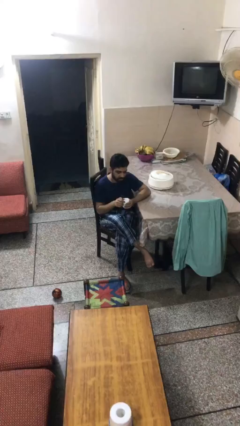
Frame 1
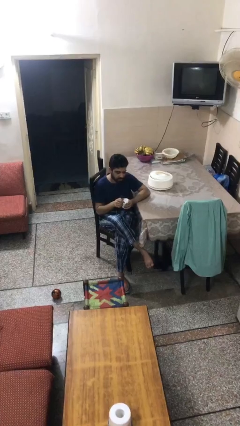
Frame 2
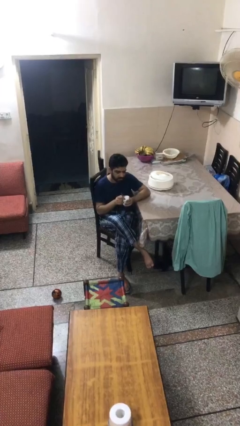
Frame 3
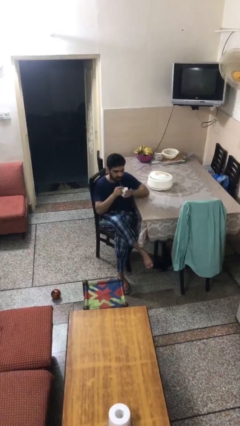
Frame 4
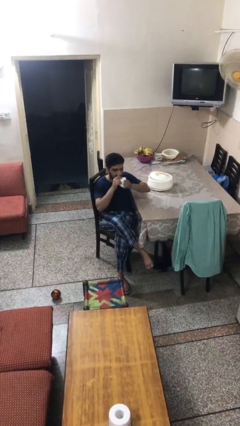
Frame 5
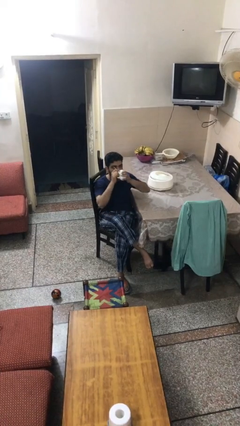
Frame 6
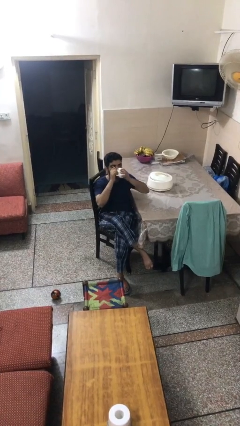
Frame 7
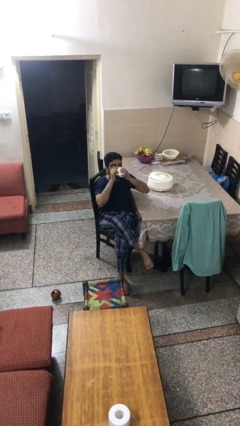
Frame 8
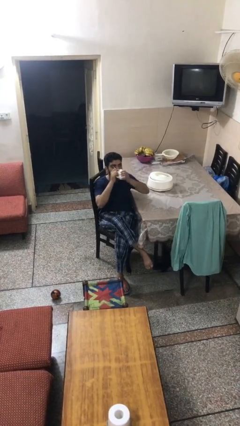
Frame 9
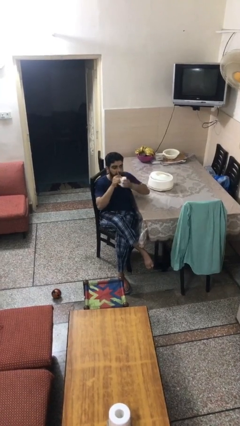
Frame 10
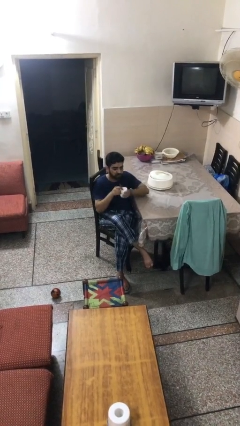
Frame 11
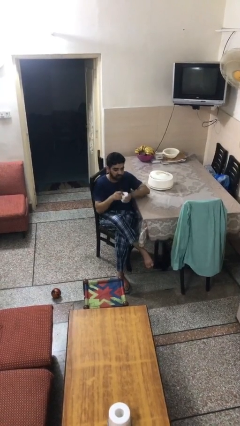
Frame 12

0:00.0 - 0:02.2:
person drinks from mug

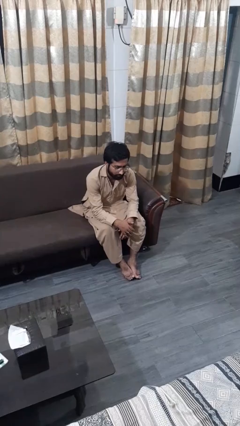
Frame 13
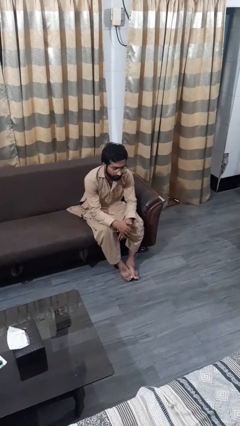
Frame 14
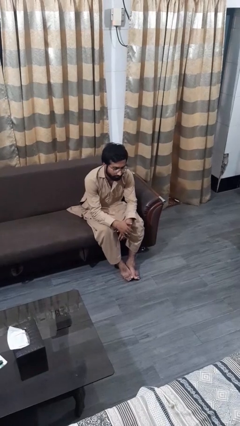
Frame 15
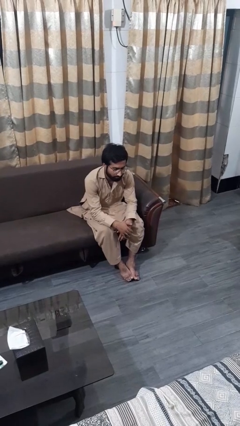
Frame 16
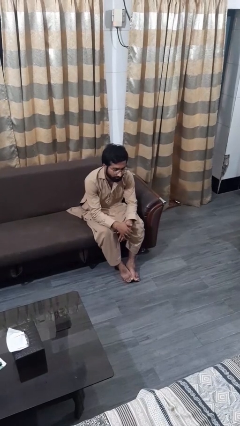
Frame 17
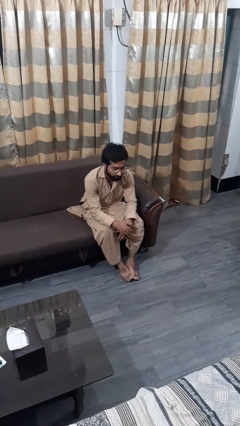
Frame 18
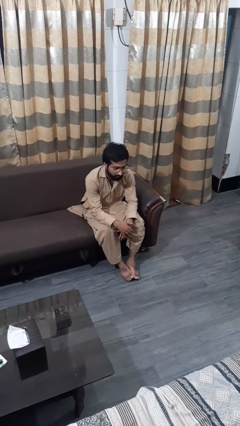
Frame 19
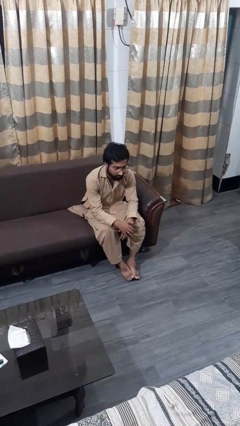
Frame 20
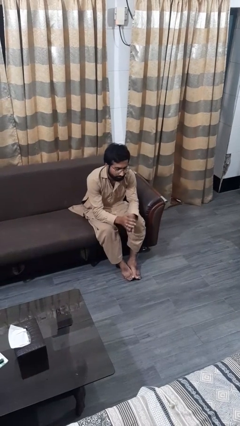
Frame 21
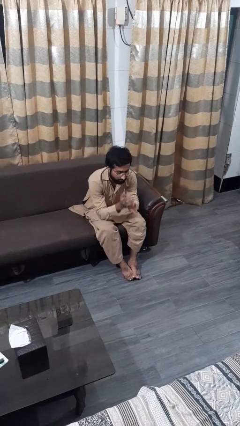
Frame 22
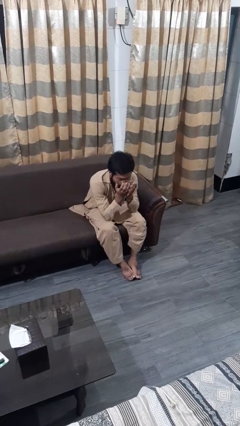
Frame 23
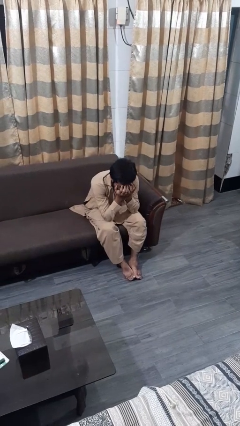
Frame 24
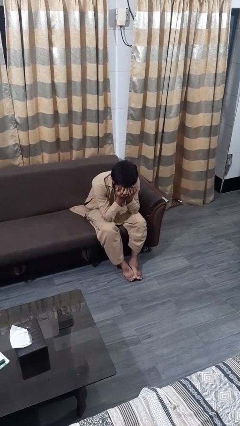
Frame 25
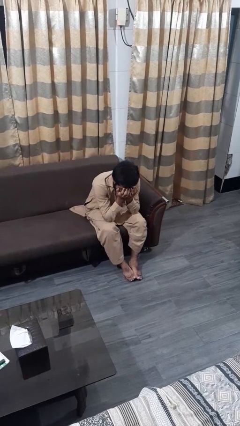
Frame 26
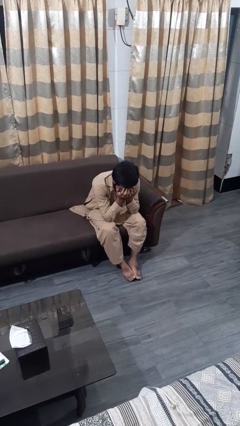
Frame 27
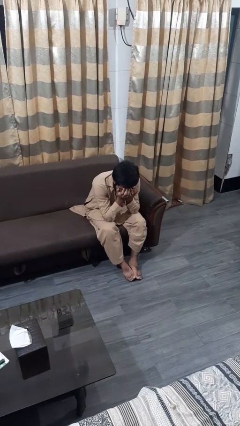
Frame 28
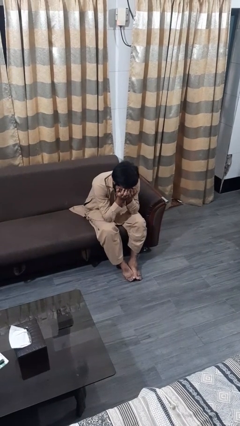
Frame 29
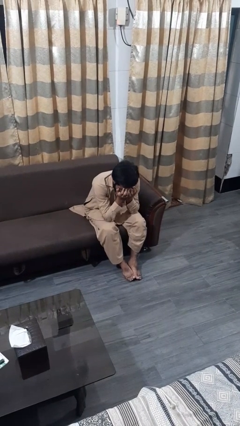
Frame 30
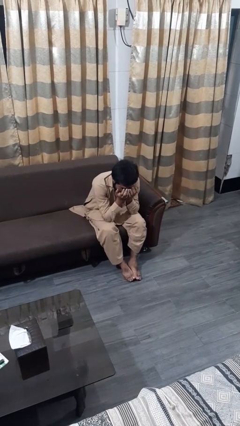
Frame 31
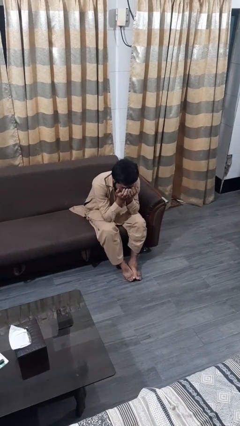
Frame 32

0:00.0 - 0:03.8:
person covers face with hands

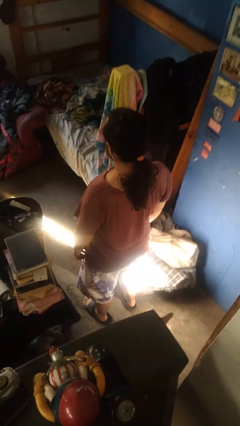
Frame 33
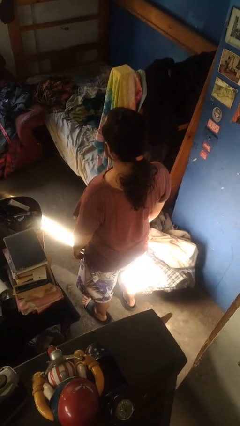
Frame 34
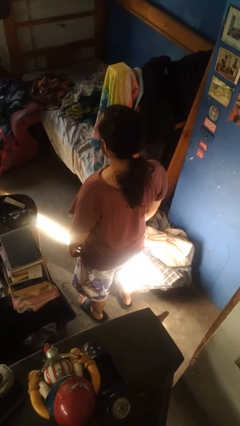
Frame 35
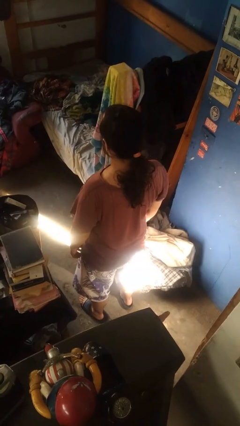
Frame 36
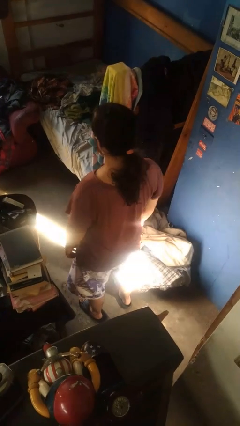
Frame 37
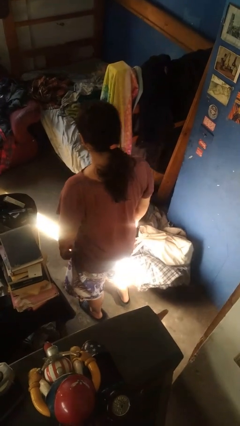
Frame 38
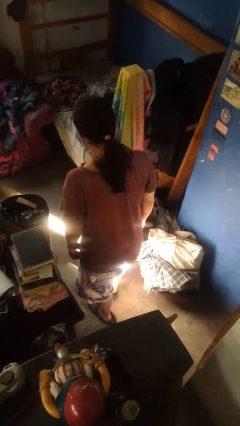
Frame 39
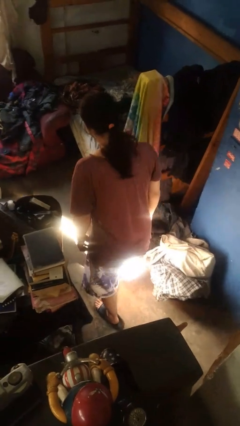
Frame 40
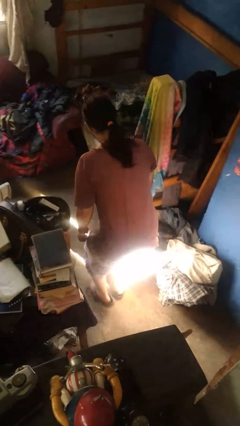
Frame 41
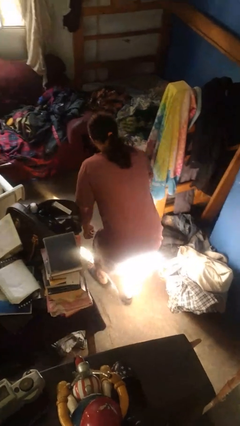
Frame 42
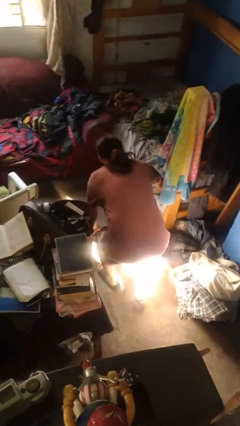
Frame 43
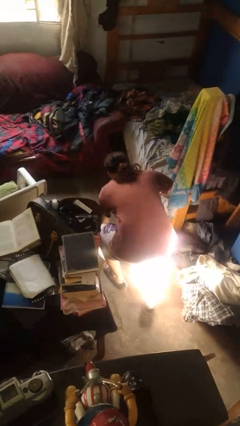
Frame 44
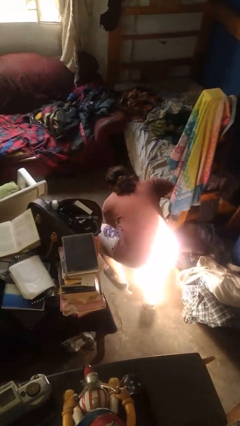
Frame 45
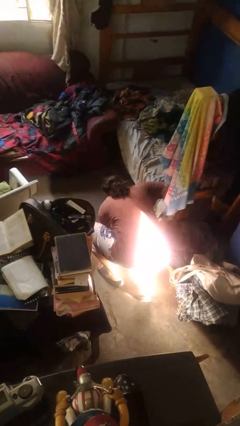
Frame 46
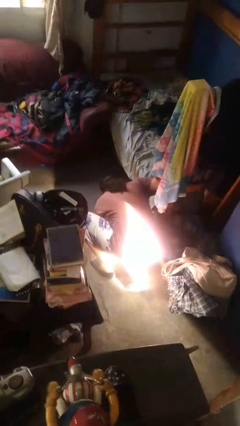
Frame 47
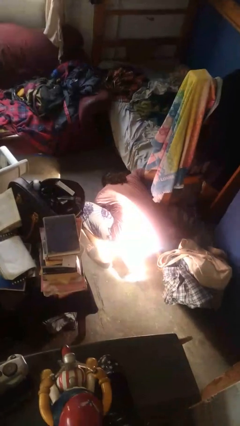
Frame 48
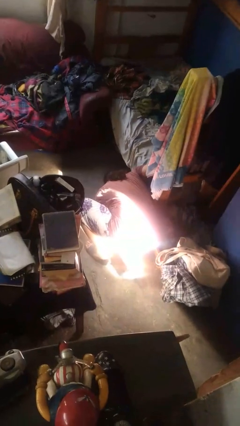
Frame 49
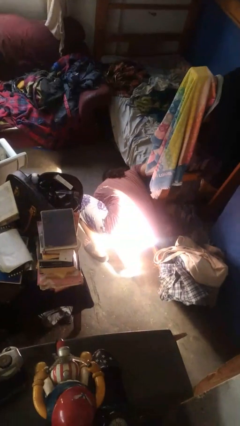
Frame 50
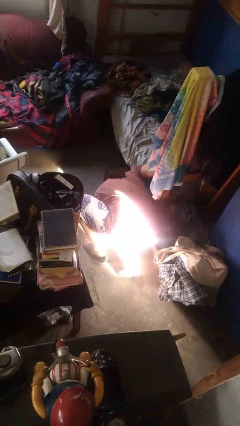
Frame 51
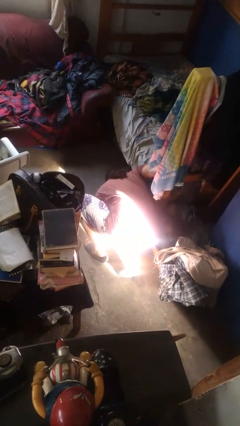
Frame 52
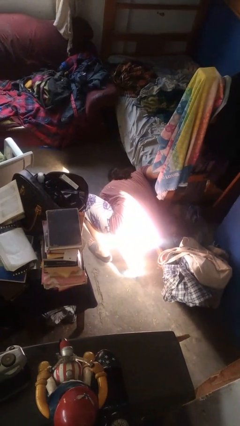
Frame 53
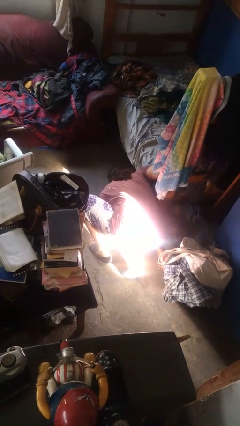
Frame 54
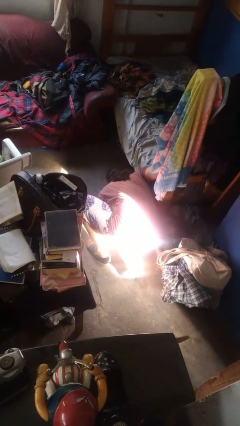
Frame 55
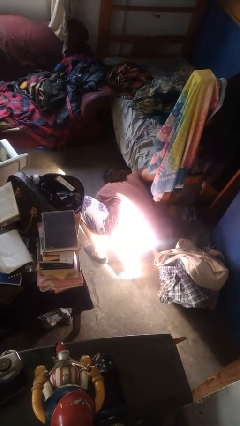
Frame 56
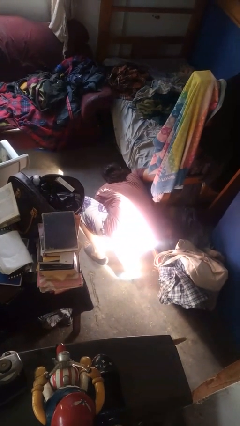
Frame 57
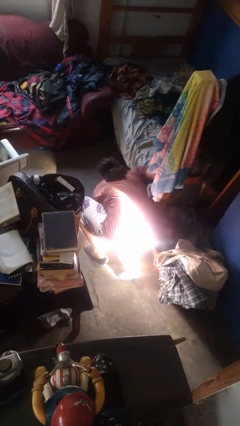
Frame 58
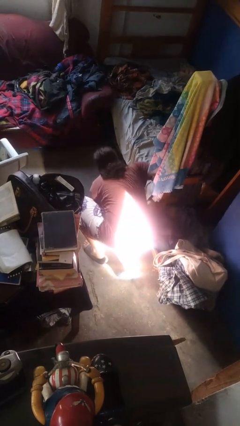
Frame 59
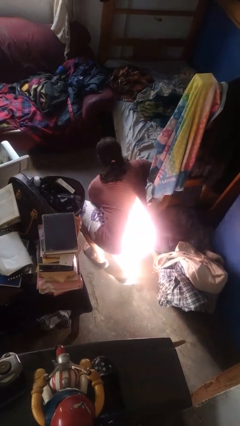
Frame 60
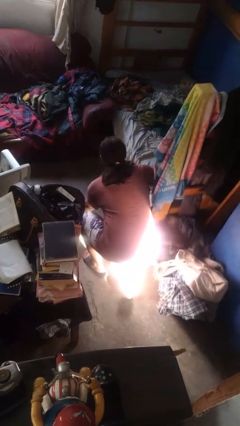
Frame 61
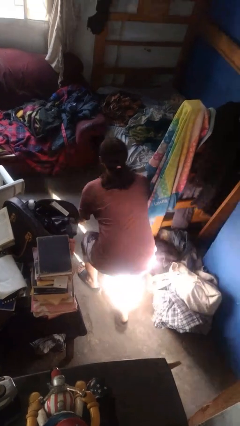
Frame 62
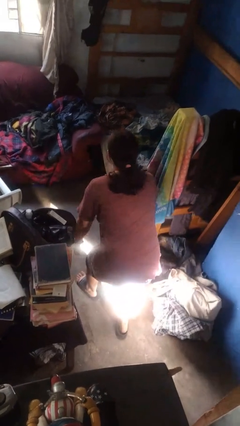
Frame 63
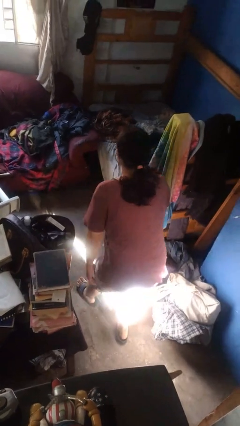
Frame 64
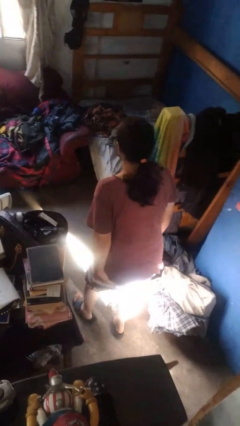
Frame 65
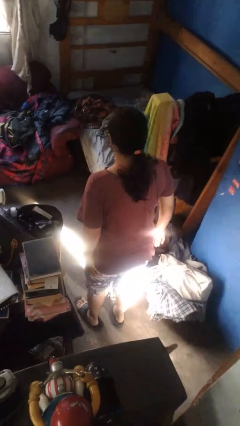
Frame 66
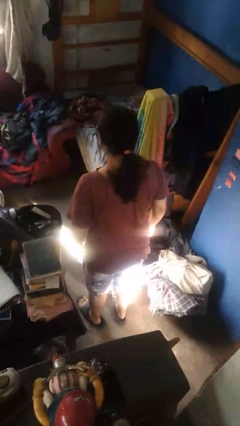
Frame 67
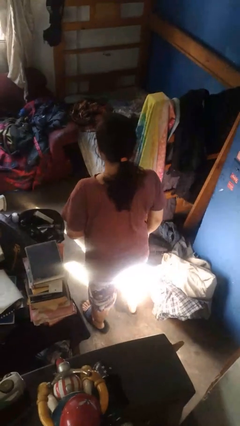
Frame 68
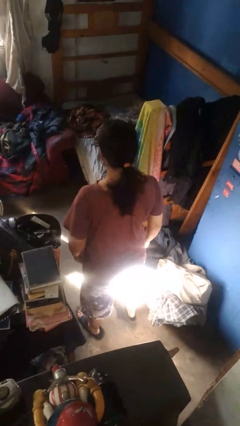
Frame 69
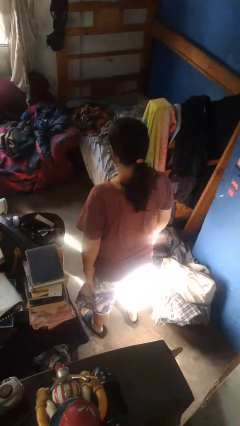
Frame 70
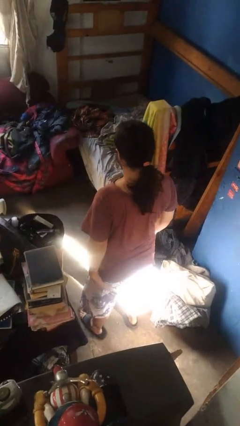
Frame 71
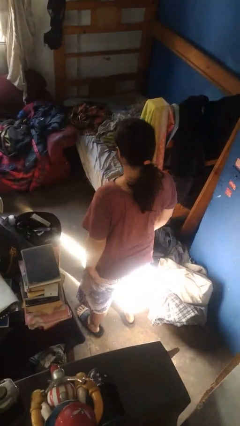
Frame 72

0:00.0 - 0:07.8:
person searches under bed

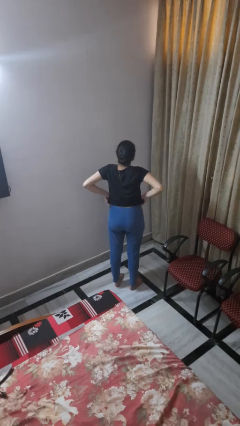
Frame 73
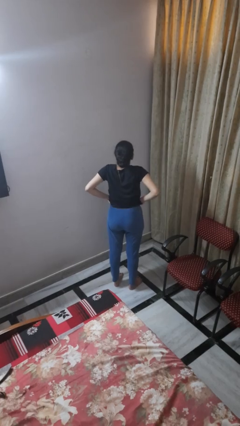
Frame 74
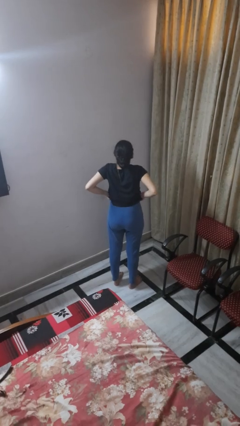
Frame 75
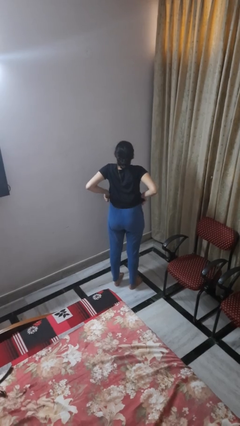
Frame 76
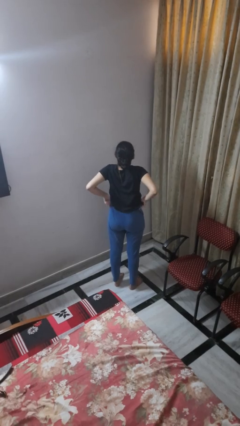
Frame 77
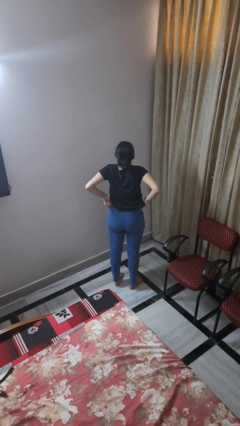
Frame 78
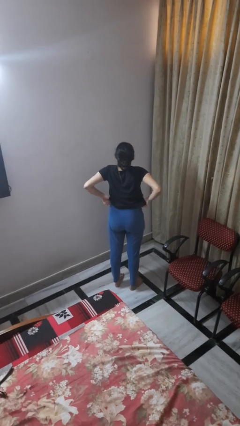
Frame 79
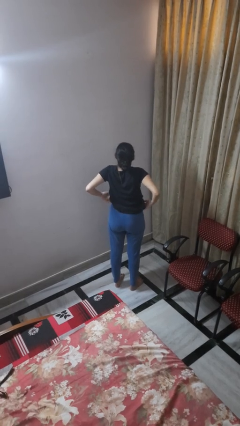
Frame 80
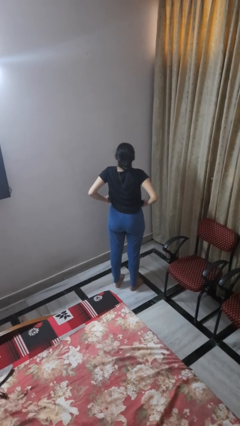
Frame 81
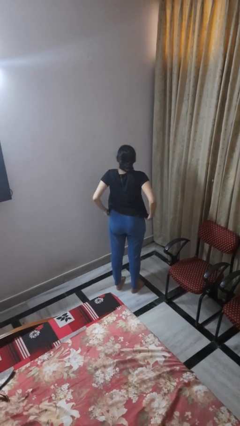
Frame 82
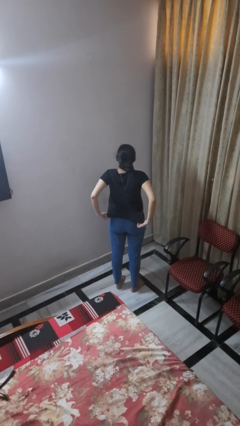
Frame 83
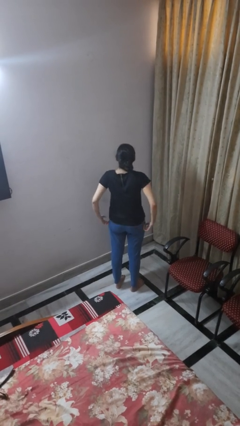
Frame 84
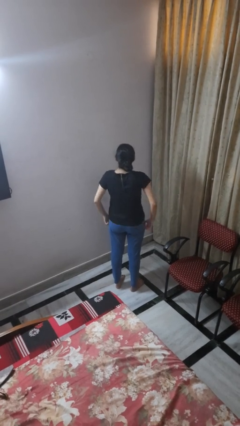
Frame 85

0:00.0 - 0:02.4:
person hikes up pants

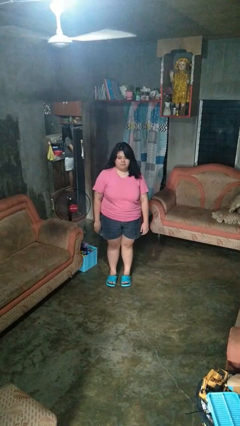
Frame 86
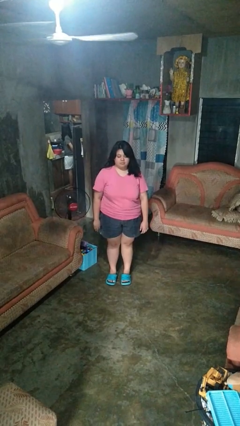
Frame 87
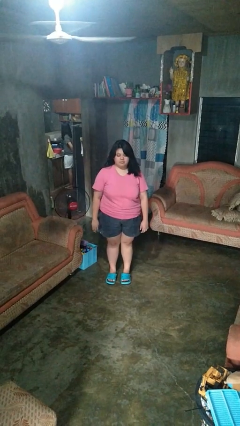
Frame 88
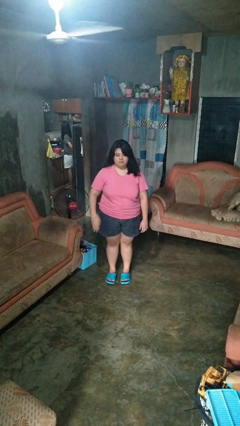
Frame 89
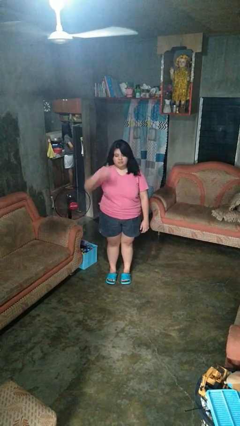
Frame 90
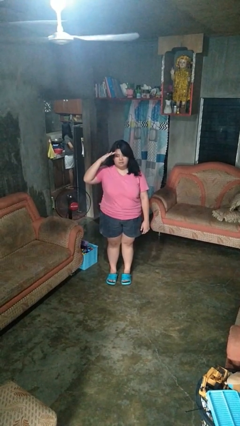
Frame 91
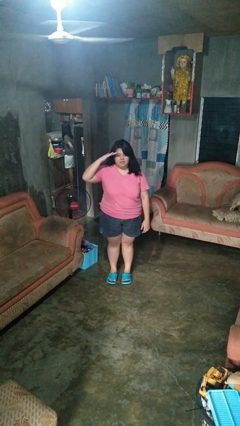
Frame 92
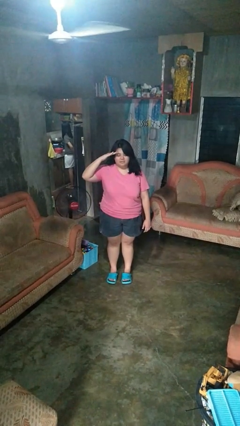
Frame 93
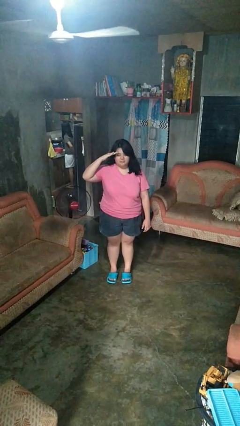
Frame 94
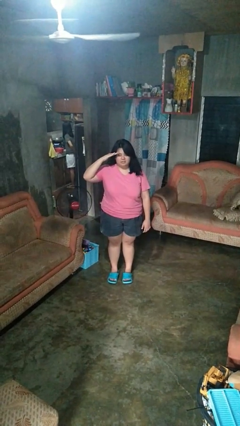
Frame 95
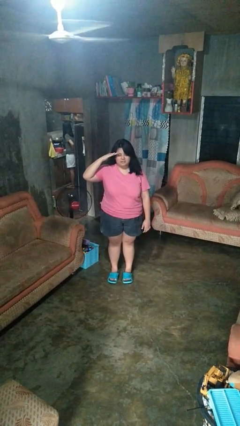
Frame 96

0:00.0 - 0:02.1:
person salutes
